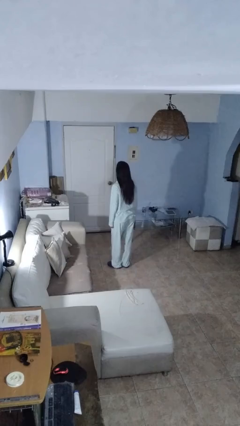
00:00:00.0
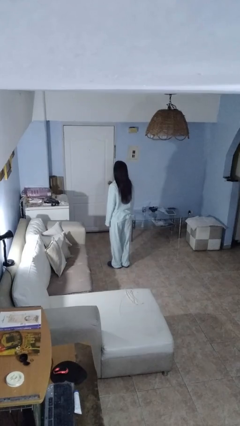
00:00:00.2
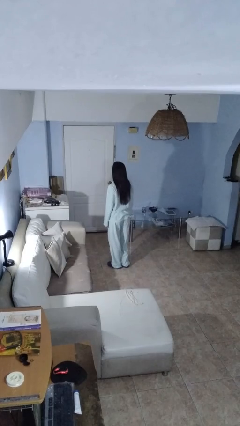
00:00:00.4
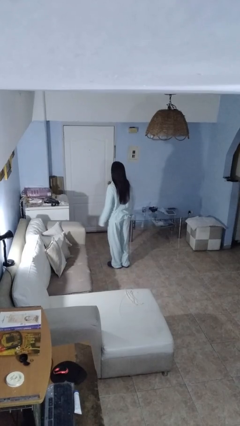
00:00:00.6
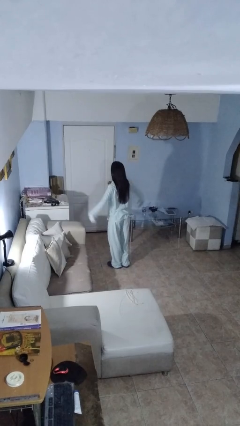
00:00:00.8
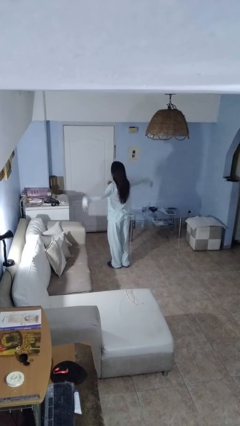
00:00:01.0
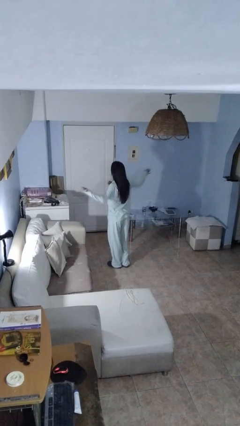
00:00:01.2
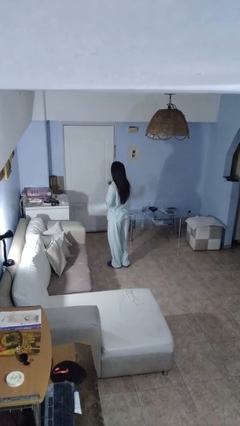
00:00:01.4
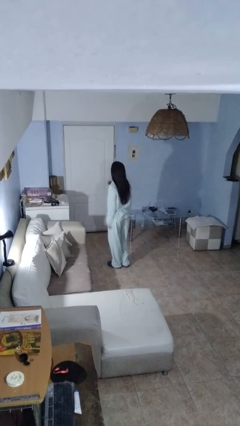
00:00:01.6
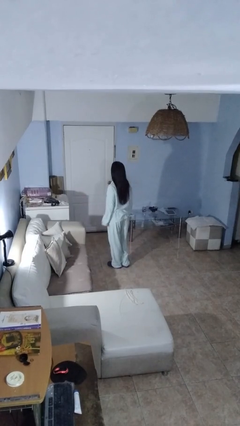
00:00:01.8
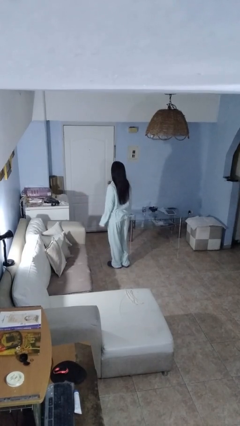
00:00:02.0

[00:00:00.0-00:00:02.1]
person slaps hands on thighs

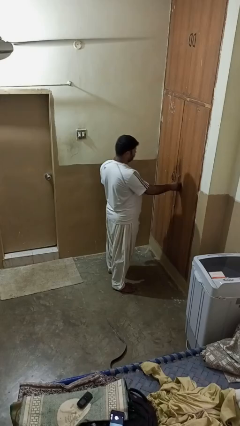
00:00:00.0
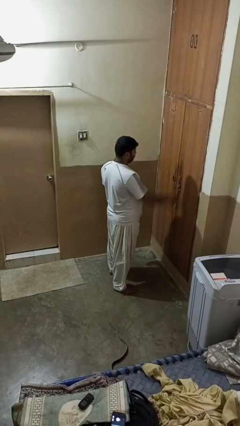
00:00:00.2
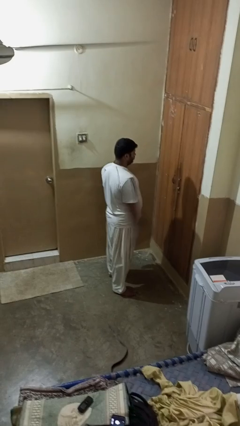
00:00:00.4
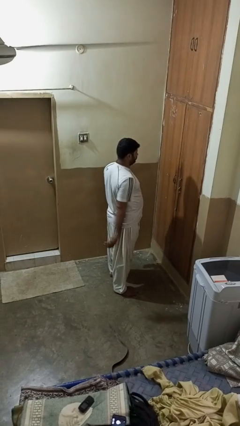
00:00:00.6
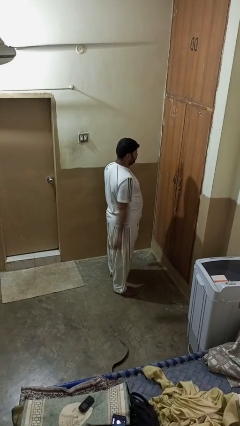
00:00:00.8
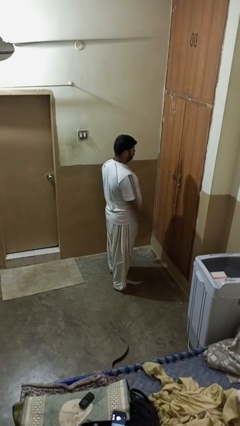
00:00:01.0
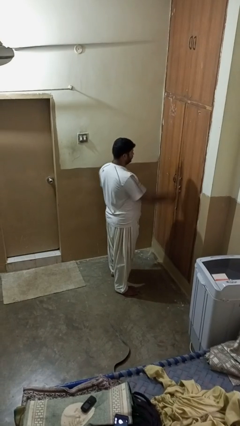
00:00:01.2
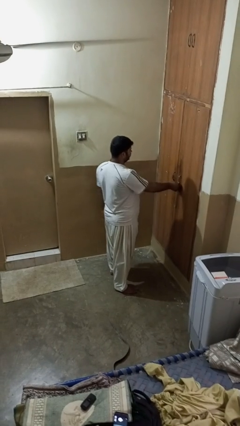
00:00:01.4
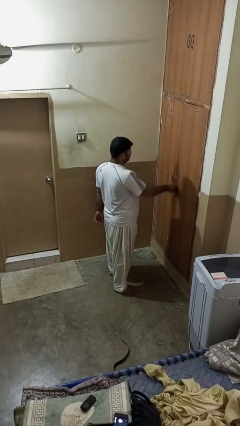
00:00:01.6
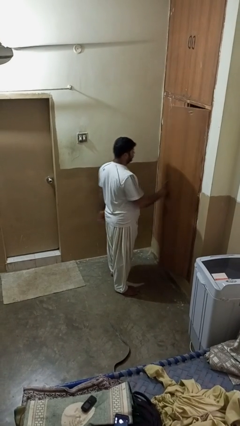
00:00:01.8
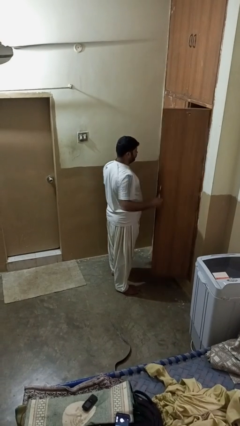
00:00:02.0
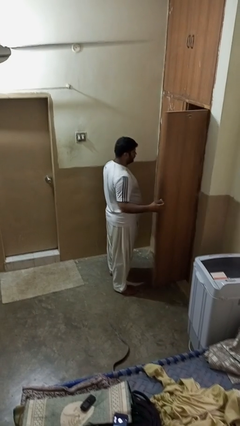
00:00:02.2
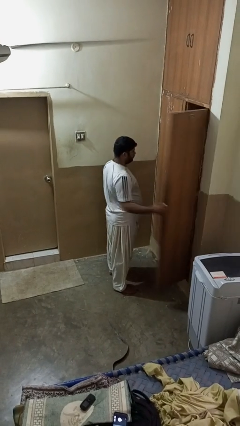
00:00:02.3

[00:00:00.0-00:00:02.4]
person opens closet door

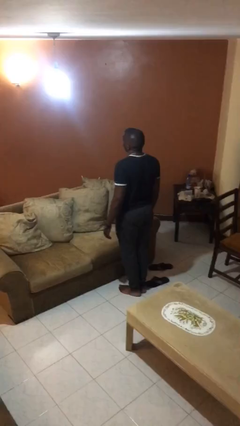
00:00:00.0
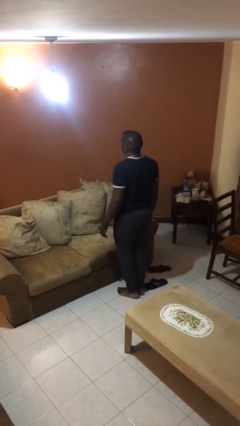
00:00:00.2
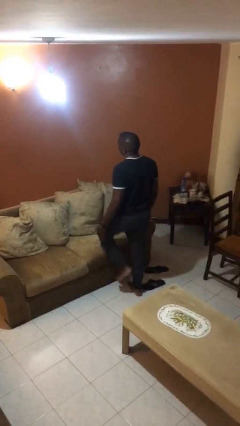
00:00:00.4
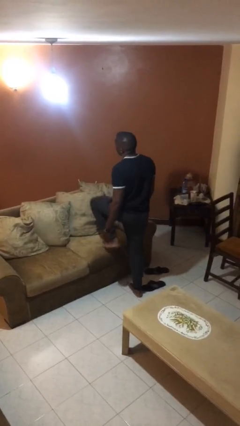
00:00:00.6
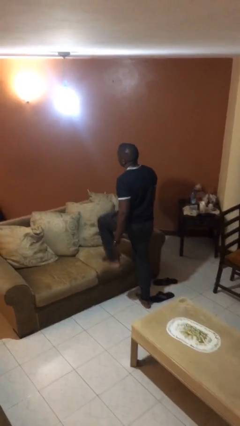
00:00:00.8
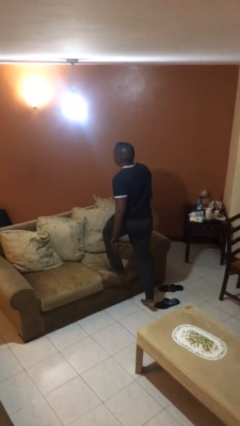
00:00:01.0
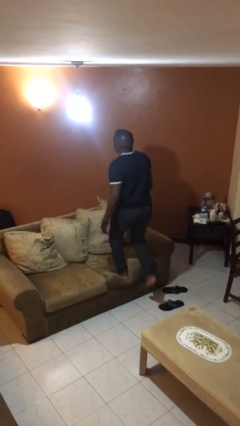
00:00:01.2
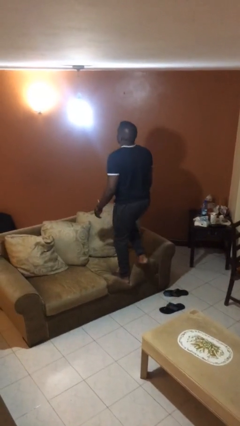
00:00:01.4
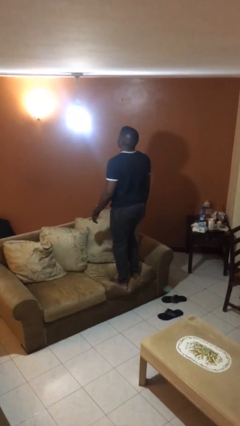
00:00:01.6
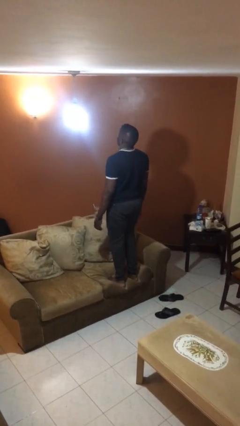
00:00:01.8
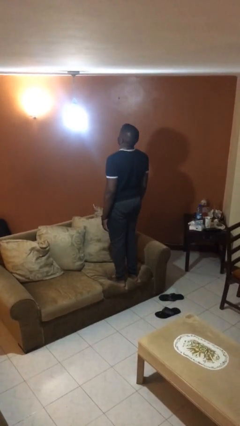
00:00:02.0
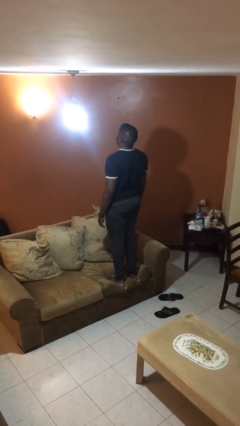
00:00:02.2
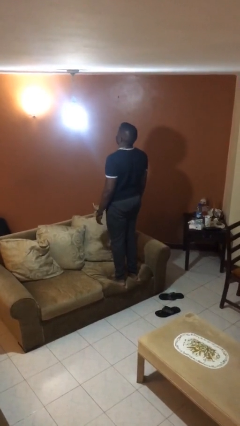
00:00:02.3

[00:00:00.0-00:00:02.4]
person climbs on couch

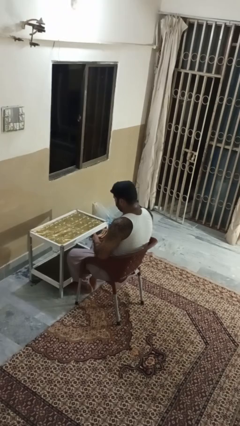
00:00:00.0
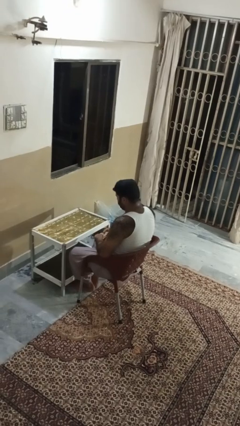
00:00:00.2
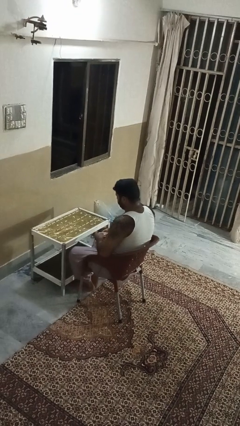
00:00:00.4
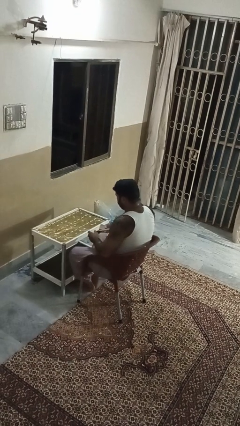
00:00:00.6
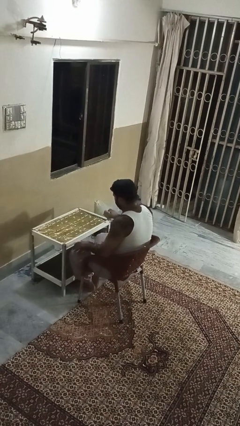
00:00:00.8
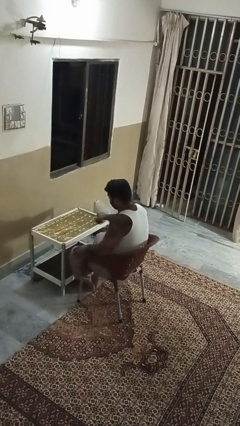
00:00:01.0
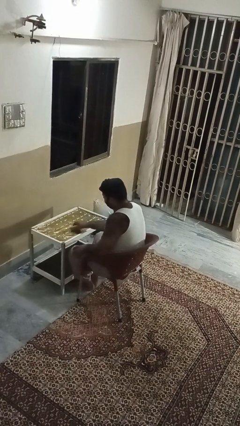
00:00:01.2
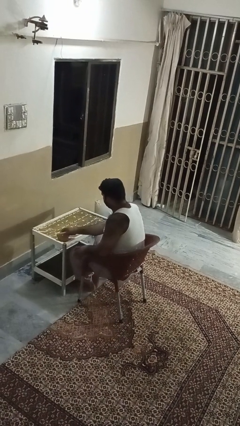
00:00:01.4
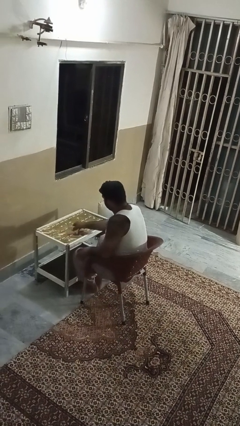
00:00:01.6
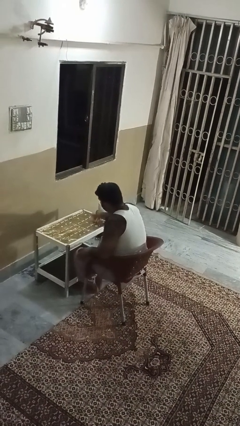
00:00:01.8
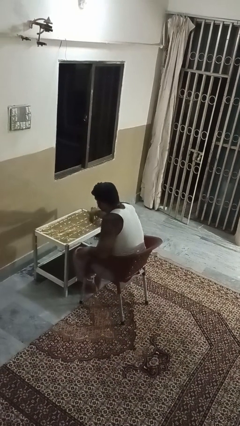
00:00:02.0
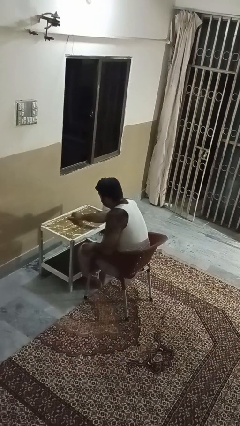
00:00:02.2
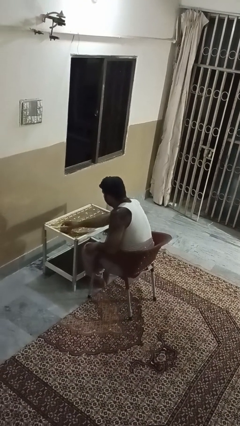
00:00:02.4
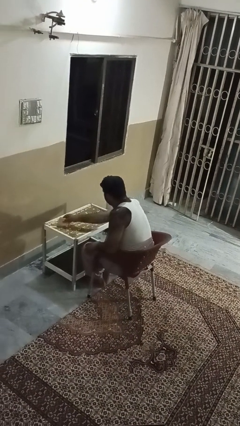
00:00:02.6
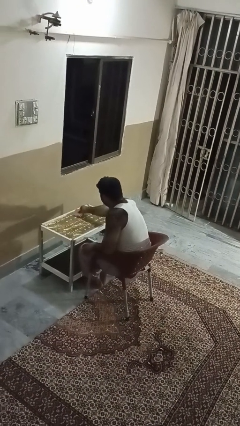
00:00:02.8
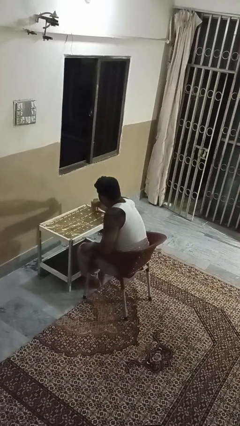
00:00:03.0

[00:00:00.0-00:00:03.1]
person cleans table with rag

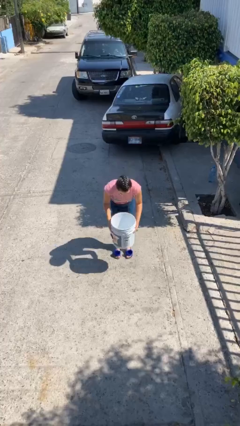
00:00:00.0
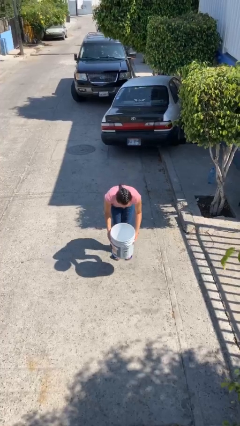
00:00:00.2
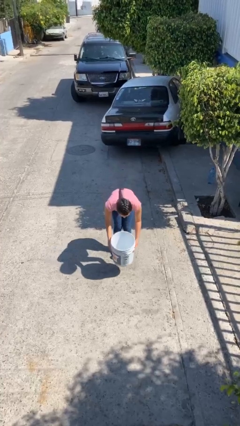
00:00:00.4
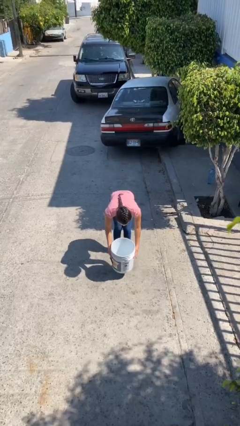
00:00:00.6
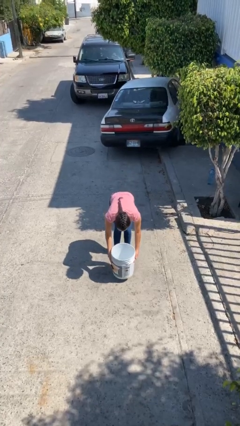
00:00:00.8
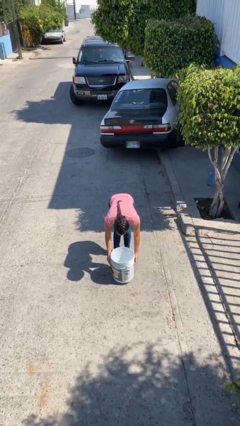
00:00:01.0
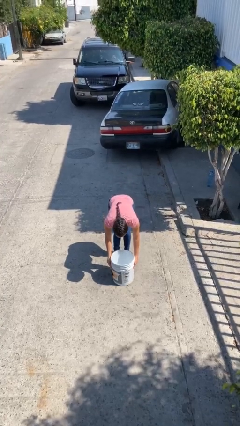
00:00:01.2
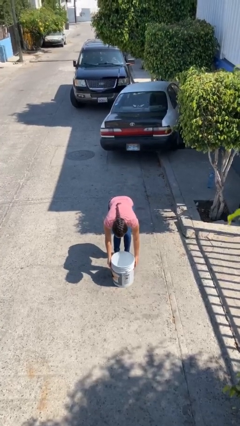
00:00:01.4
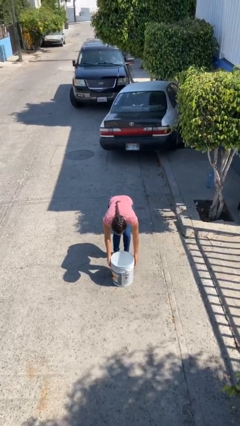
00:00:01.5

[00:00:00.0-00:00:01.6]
person puts down object on floor

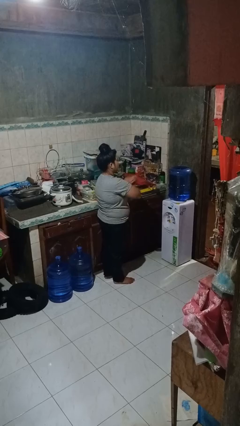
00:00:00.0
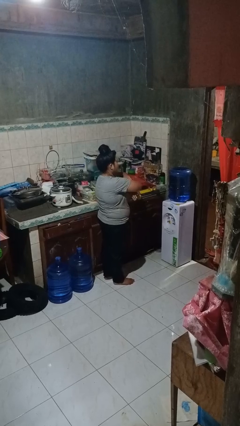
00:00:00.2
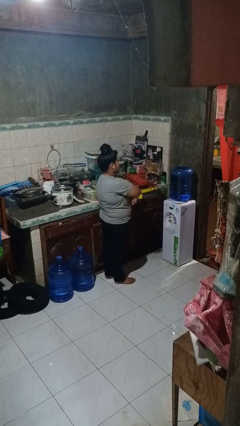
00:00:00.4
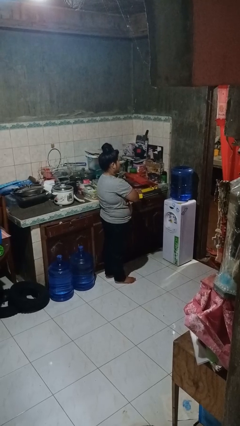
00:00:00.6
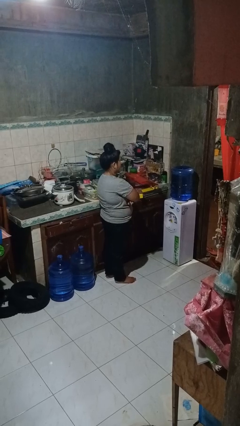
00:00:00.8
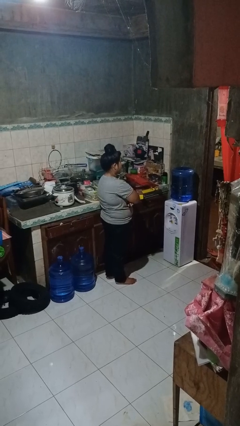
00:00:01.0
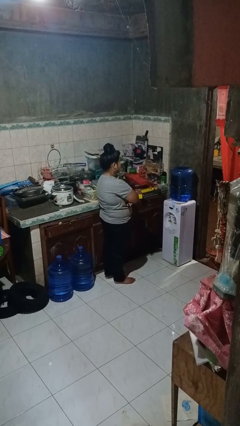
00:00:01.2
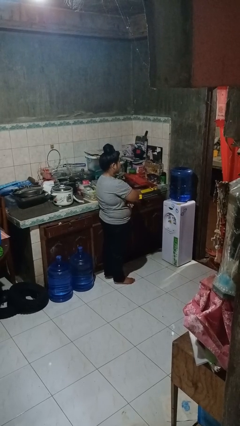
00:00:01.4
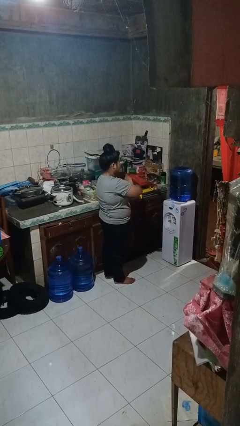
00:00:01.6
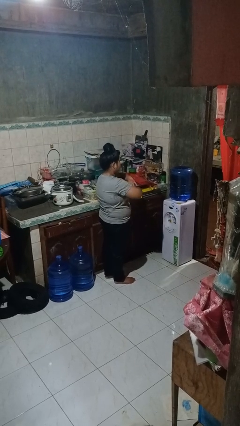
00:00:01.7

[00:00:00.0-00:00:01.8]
person crosses arms

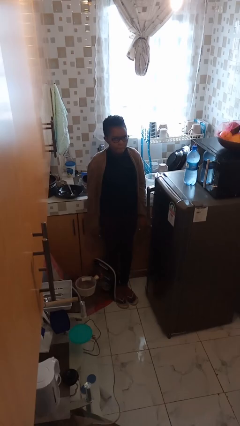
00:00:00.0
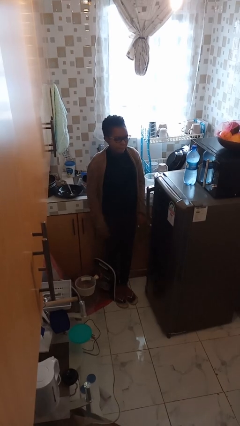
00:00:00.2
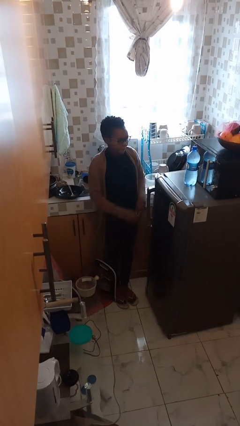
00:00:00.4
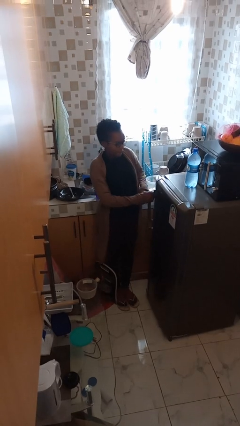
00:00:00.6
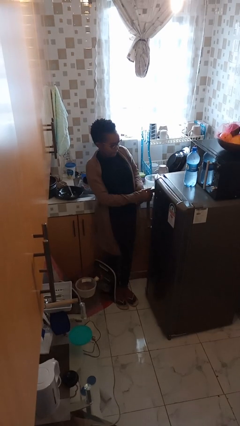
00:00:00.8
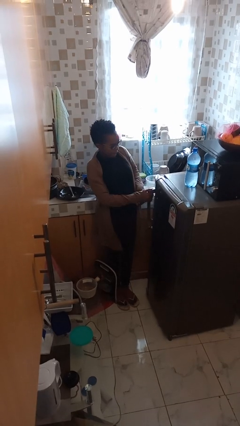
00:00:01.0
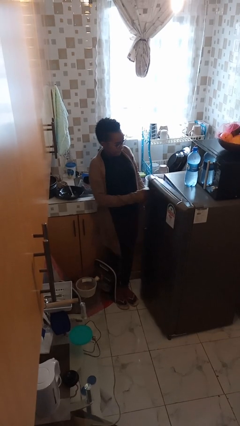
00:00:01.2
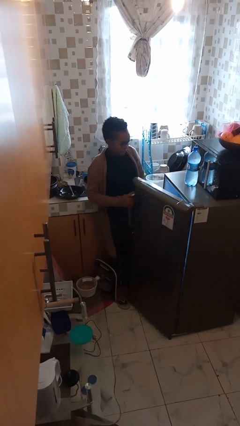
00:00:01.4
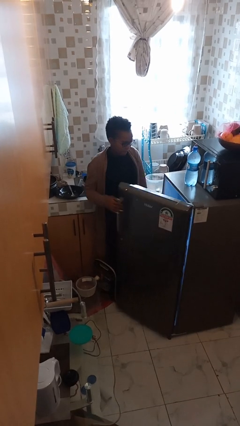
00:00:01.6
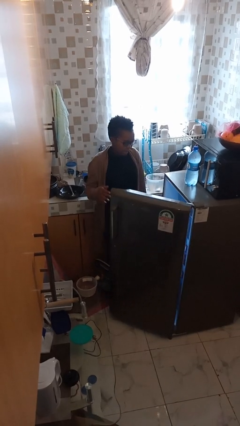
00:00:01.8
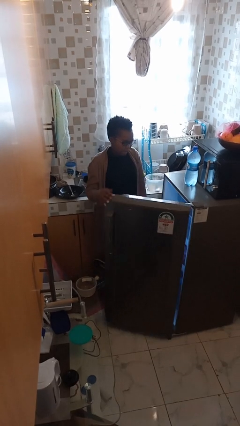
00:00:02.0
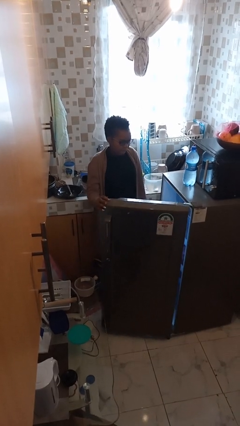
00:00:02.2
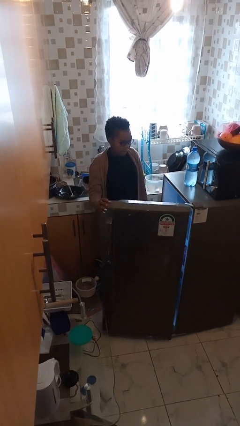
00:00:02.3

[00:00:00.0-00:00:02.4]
person opens refrigerator

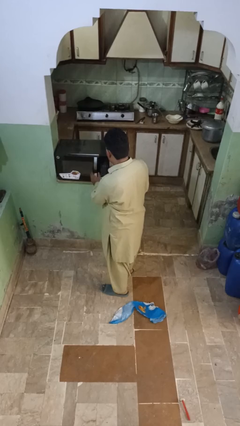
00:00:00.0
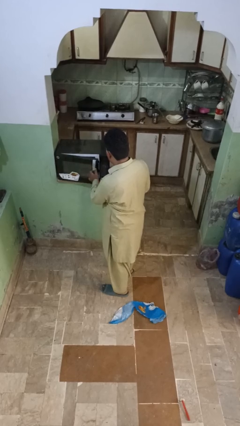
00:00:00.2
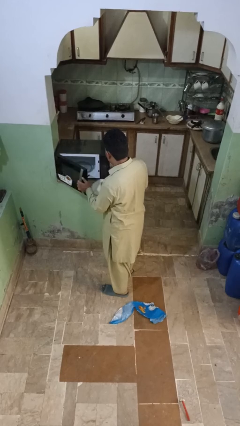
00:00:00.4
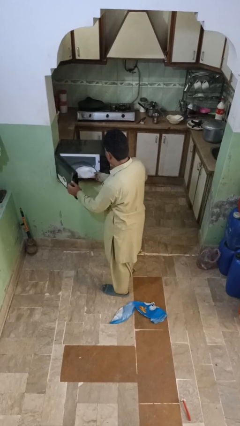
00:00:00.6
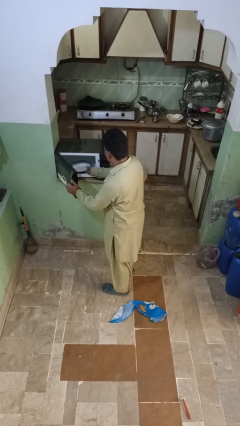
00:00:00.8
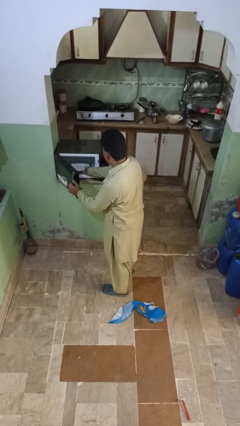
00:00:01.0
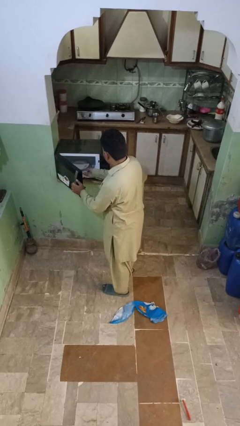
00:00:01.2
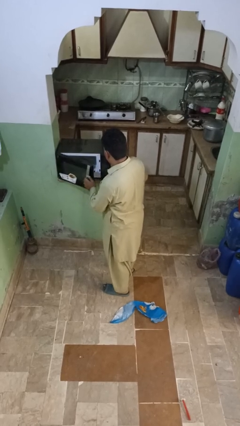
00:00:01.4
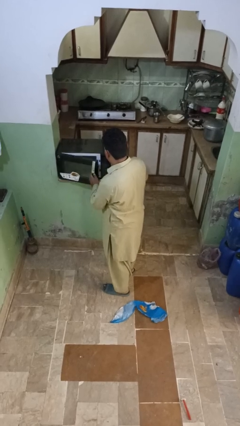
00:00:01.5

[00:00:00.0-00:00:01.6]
person puts object into microwave
